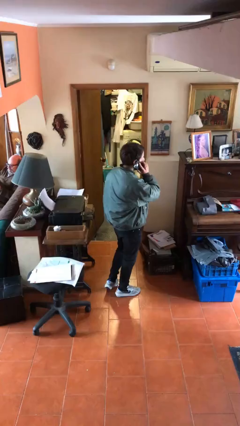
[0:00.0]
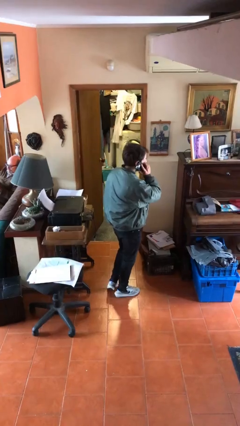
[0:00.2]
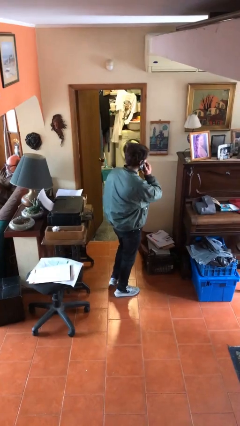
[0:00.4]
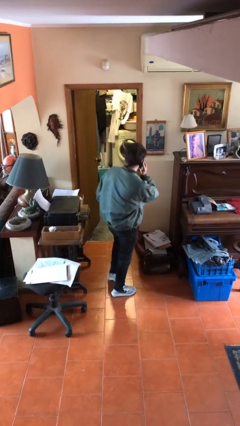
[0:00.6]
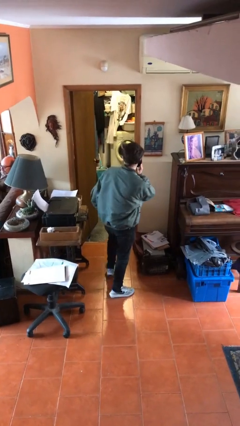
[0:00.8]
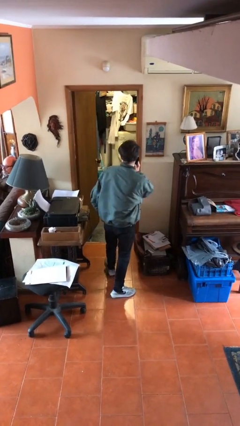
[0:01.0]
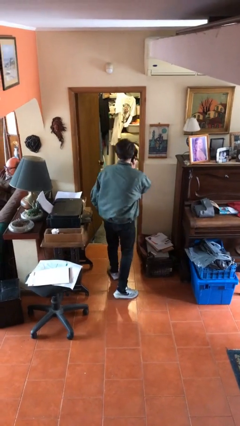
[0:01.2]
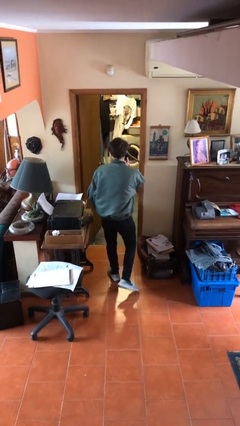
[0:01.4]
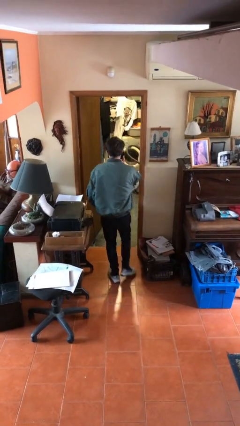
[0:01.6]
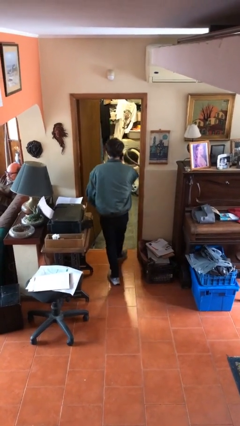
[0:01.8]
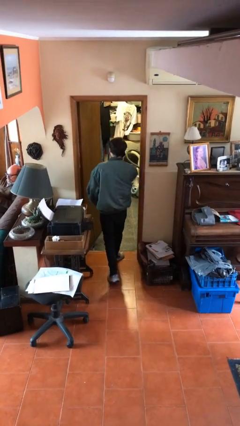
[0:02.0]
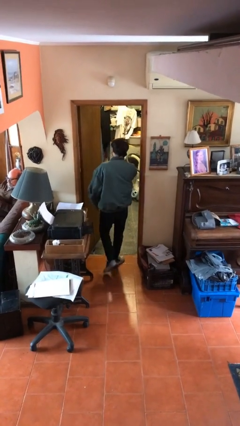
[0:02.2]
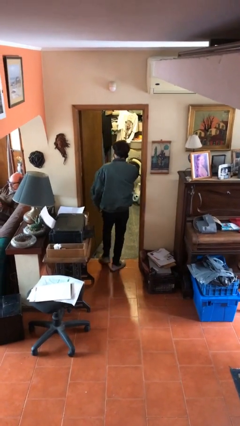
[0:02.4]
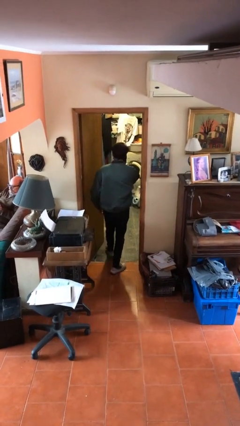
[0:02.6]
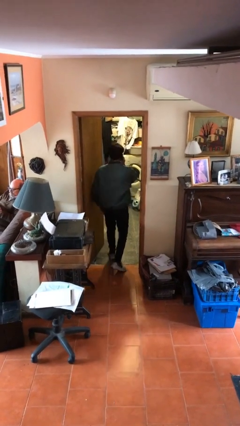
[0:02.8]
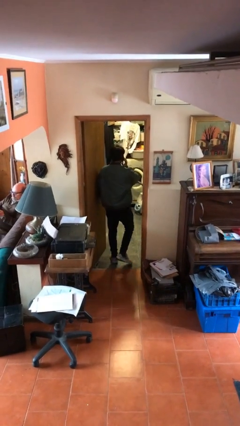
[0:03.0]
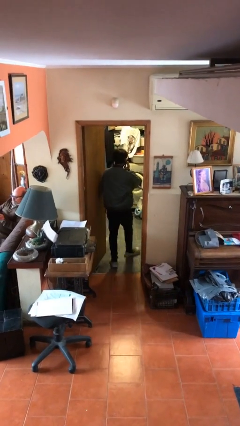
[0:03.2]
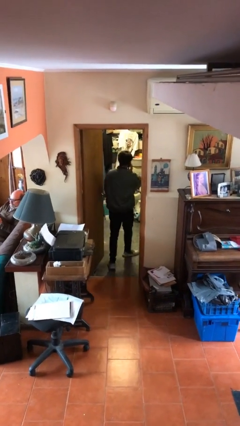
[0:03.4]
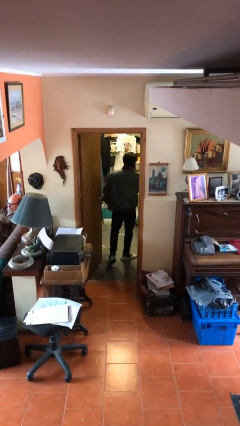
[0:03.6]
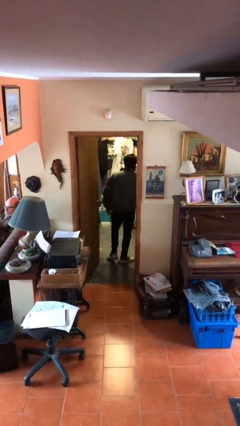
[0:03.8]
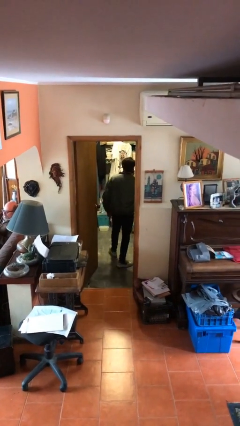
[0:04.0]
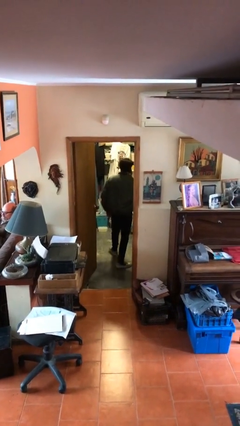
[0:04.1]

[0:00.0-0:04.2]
person exits scene through structure

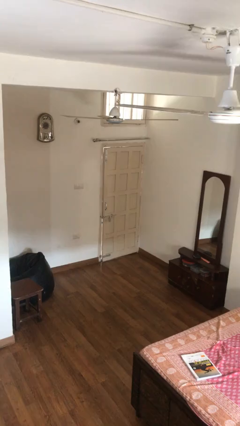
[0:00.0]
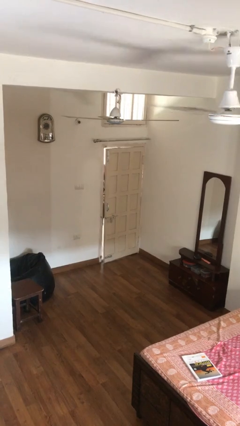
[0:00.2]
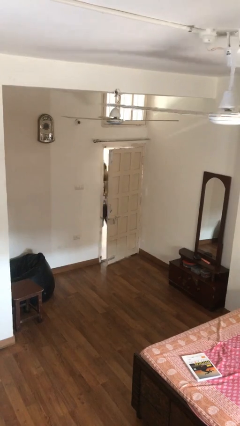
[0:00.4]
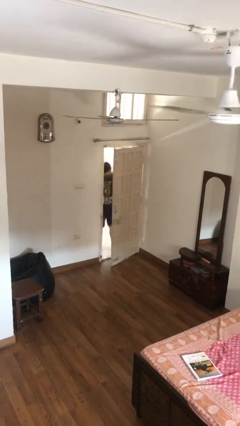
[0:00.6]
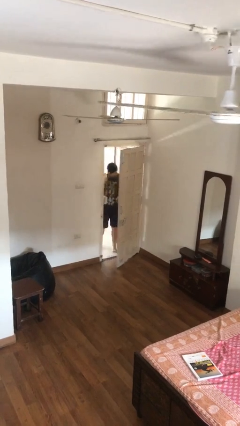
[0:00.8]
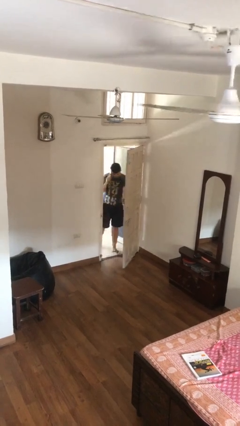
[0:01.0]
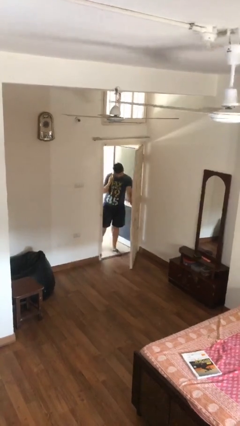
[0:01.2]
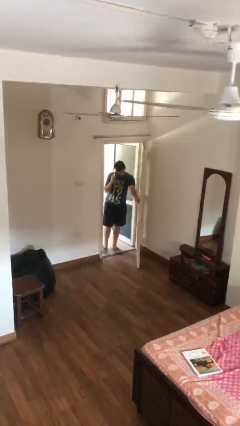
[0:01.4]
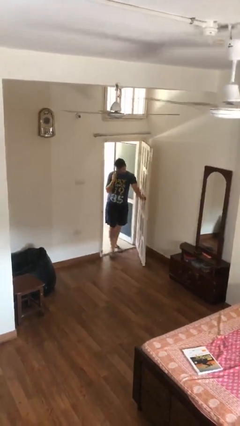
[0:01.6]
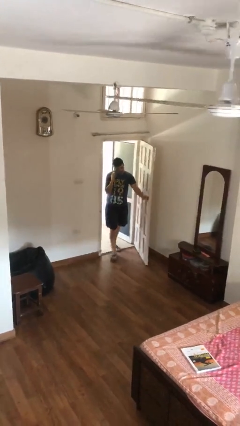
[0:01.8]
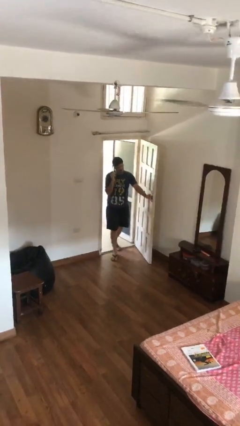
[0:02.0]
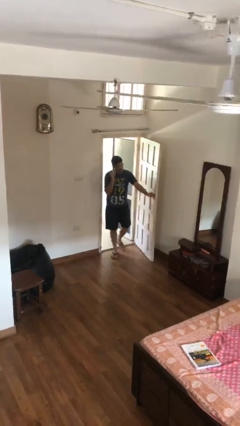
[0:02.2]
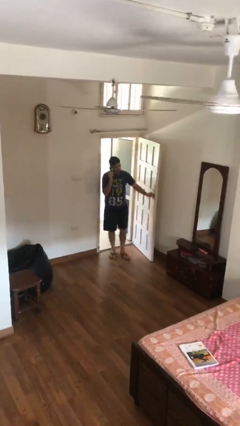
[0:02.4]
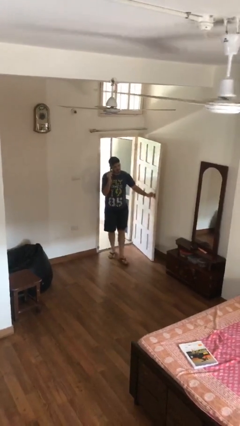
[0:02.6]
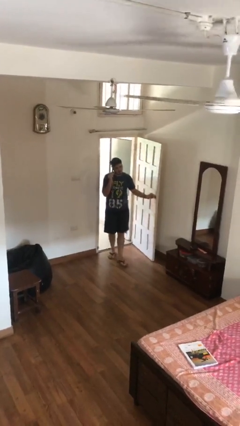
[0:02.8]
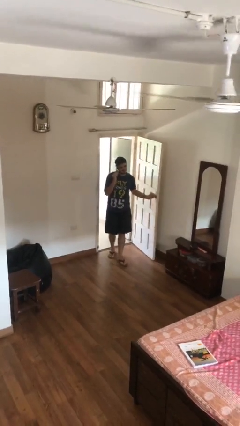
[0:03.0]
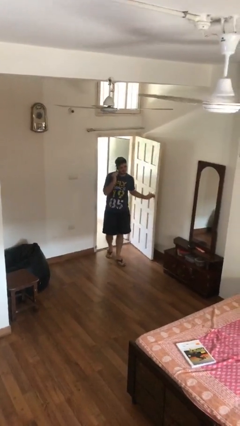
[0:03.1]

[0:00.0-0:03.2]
person opens facility door

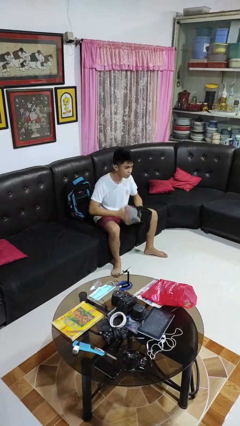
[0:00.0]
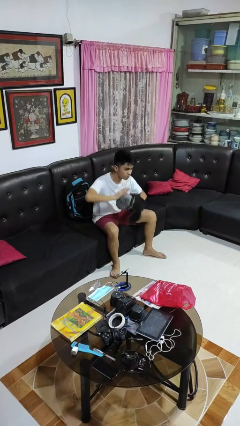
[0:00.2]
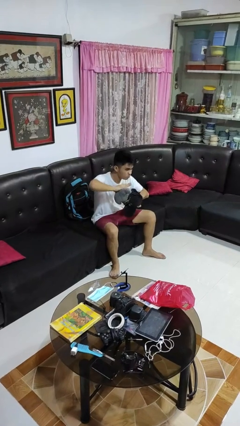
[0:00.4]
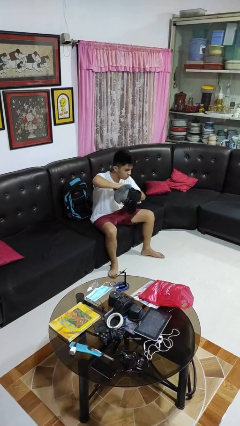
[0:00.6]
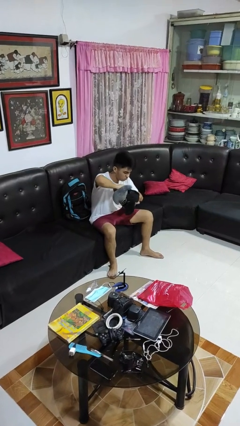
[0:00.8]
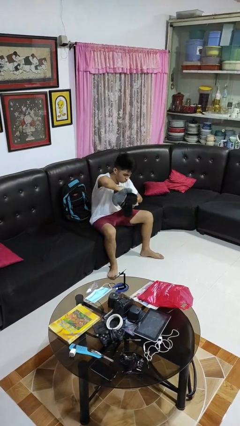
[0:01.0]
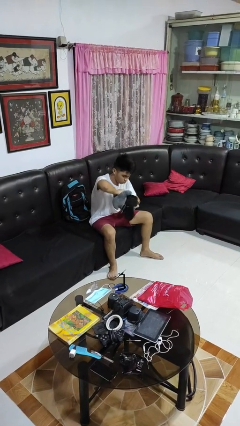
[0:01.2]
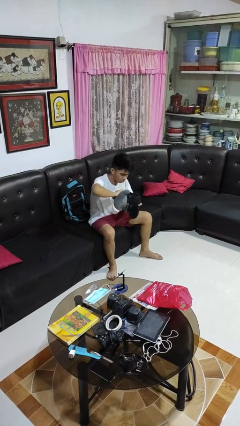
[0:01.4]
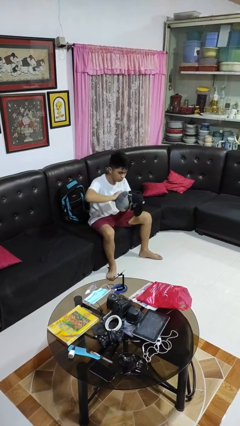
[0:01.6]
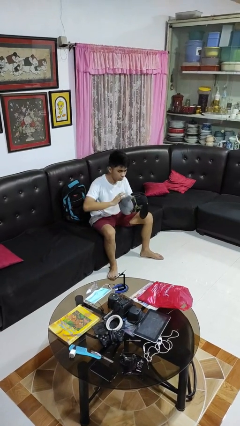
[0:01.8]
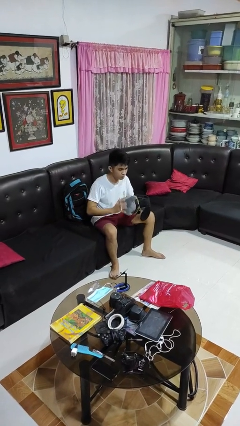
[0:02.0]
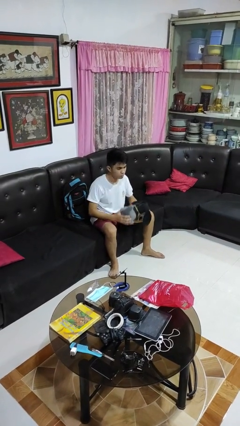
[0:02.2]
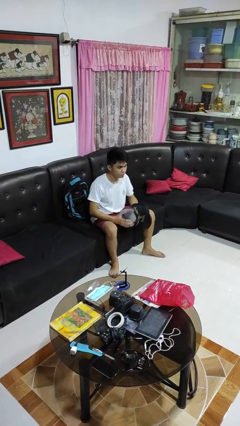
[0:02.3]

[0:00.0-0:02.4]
person squeezes object

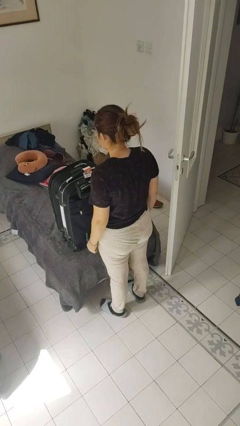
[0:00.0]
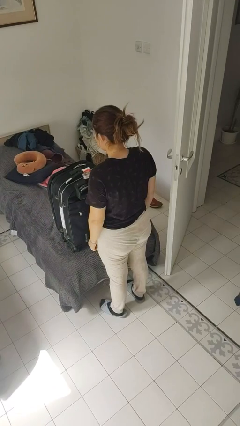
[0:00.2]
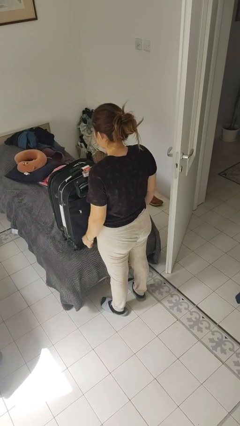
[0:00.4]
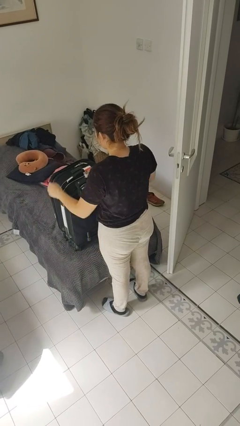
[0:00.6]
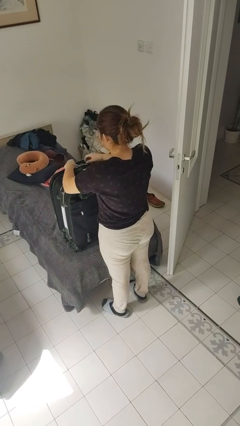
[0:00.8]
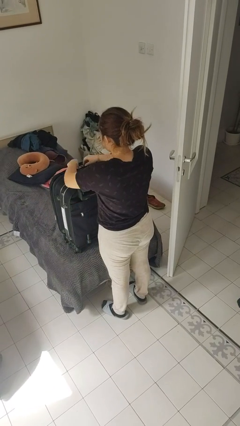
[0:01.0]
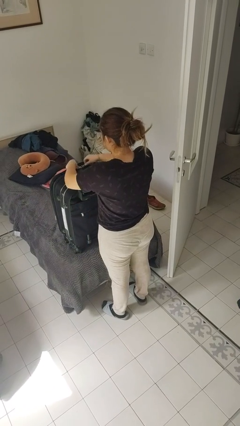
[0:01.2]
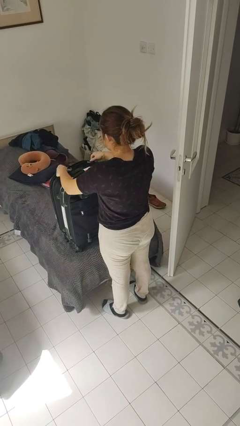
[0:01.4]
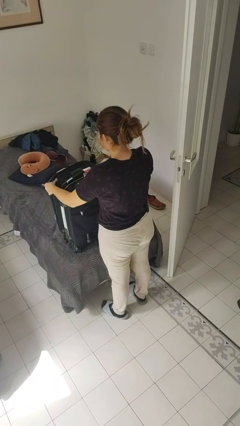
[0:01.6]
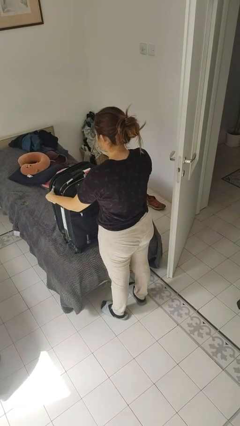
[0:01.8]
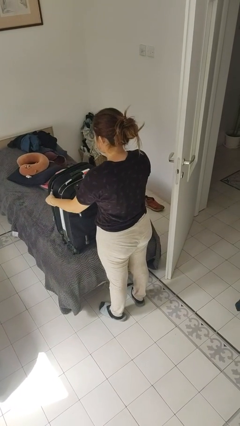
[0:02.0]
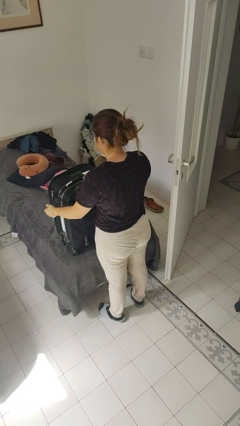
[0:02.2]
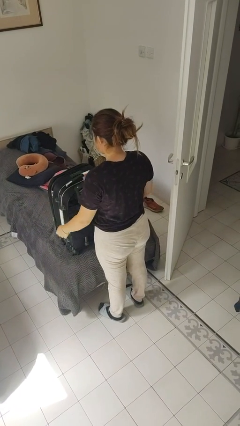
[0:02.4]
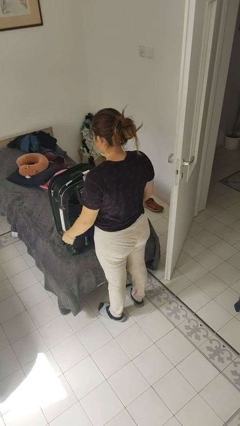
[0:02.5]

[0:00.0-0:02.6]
person opens suitcase

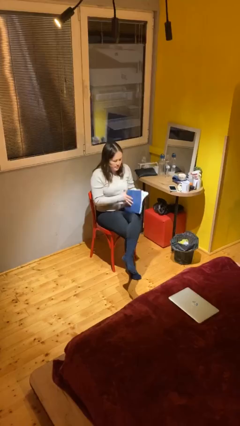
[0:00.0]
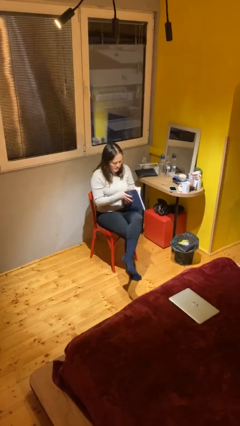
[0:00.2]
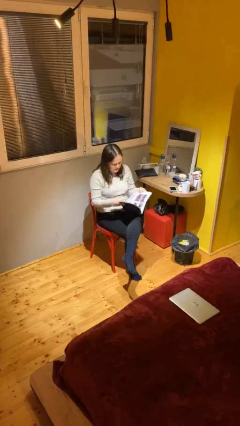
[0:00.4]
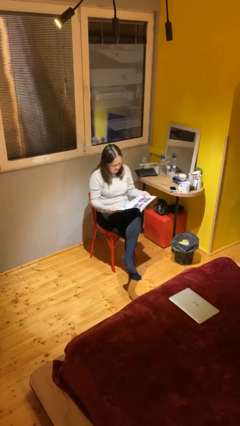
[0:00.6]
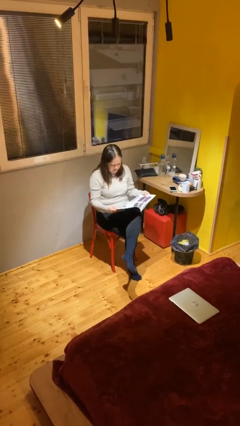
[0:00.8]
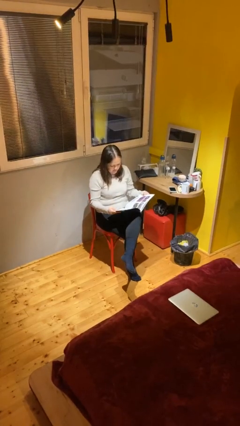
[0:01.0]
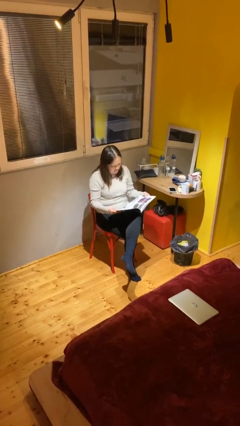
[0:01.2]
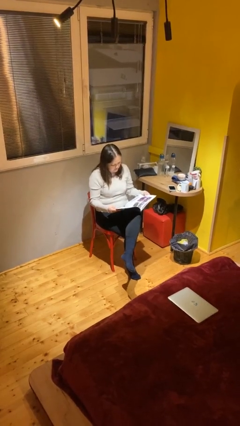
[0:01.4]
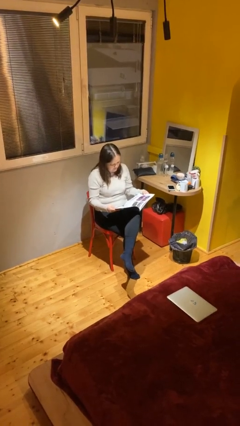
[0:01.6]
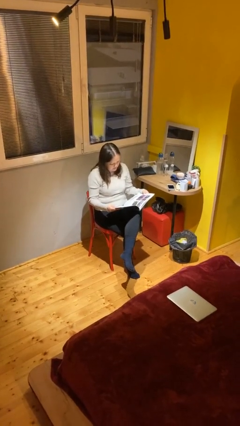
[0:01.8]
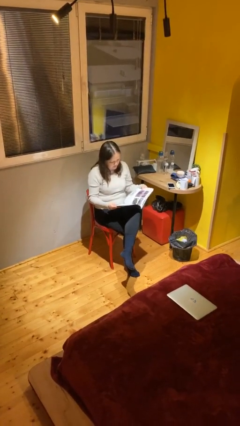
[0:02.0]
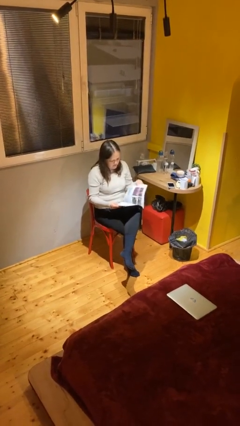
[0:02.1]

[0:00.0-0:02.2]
person reads document

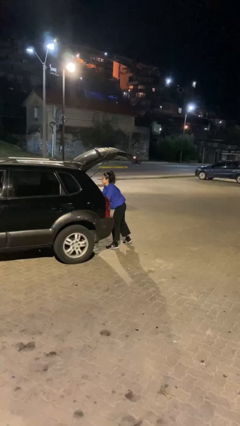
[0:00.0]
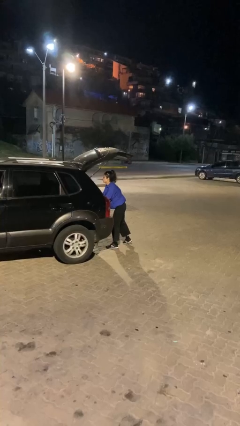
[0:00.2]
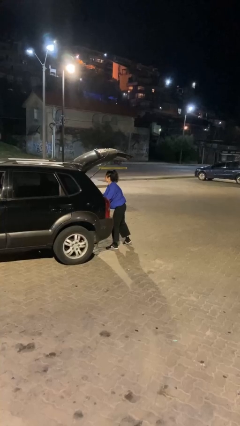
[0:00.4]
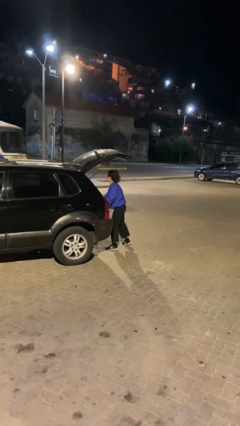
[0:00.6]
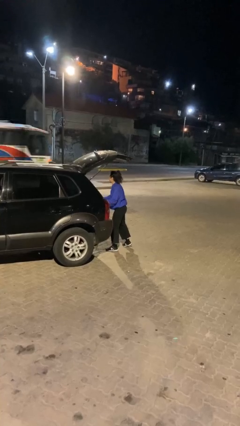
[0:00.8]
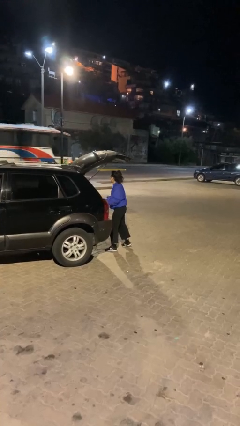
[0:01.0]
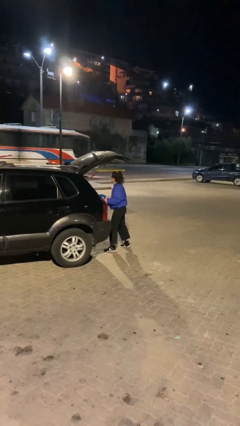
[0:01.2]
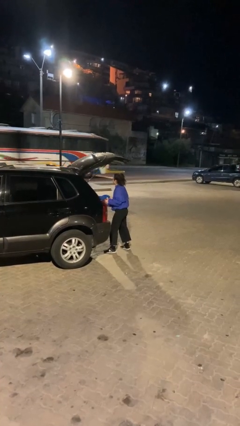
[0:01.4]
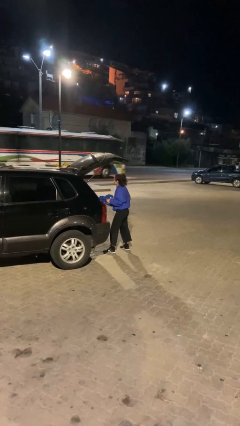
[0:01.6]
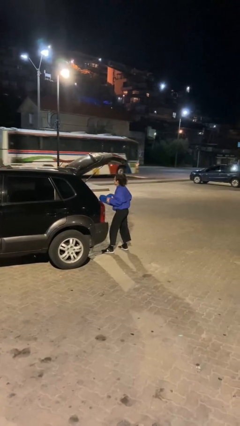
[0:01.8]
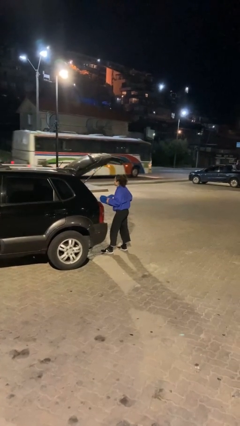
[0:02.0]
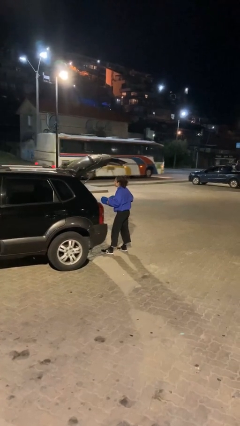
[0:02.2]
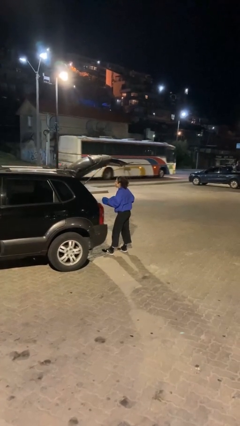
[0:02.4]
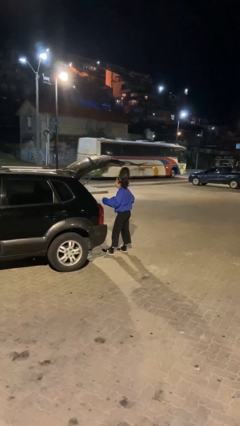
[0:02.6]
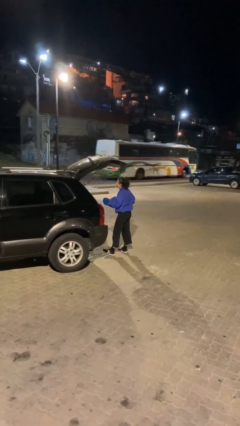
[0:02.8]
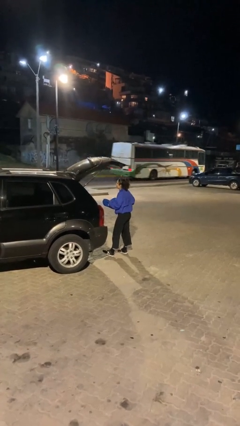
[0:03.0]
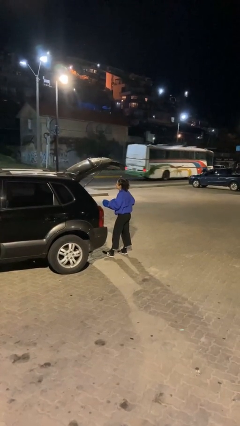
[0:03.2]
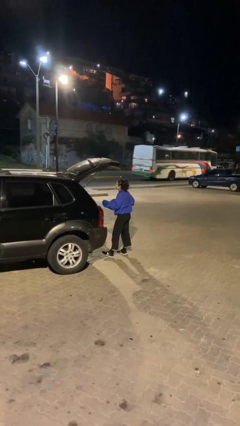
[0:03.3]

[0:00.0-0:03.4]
person unloads car
